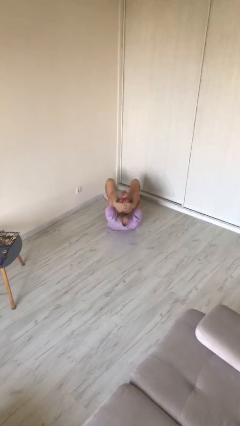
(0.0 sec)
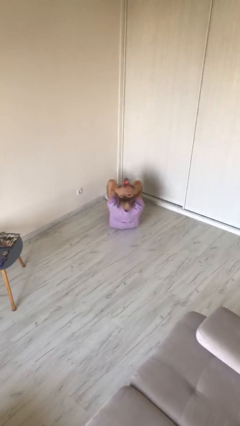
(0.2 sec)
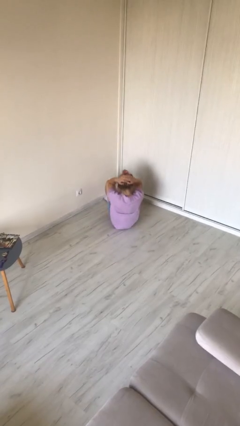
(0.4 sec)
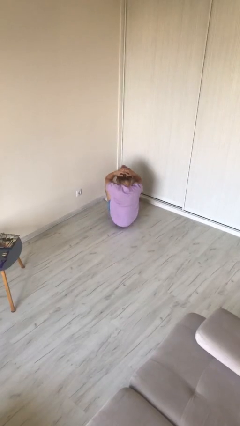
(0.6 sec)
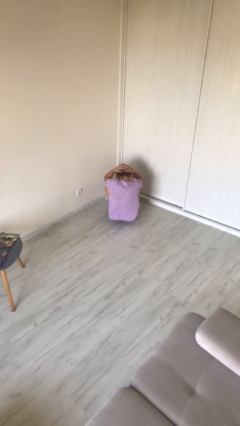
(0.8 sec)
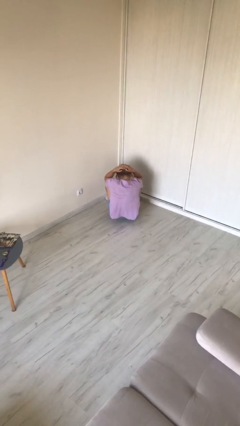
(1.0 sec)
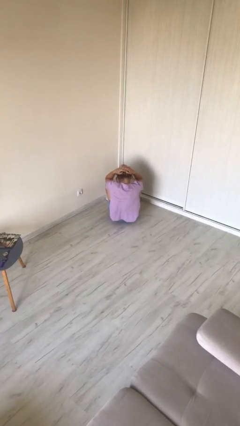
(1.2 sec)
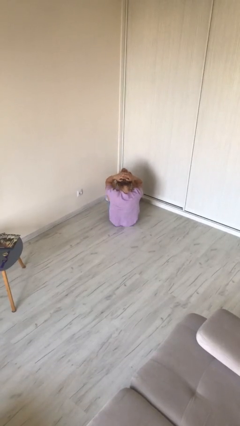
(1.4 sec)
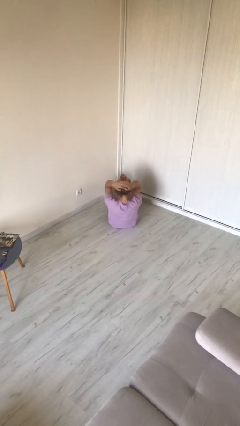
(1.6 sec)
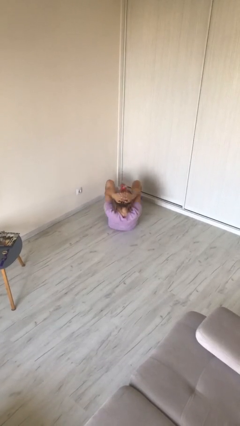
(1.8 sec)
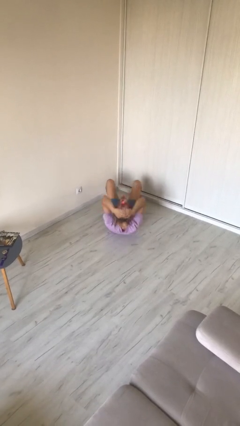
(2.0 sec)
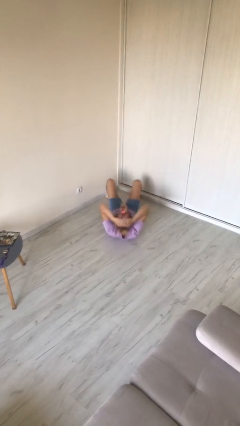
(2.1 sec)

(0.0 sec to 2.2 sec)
person exercises with situp

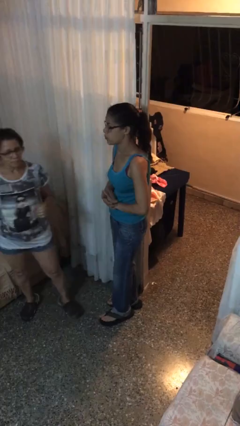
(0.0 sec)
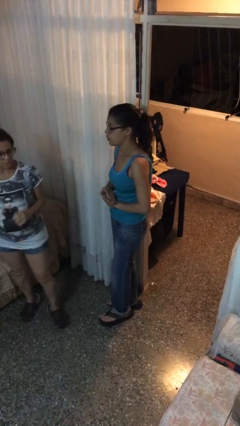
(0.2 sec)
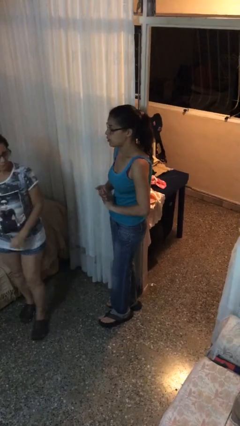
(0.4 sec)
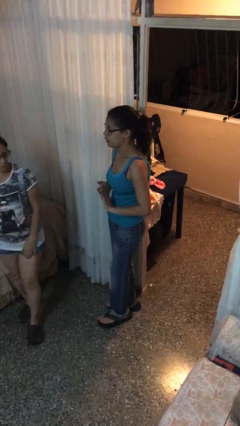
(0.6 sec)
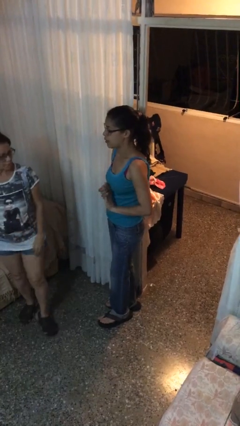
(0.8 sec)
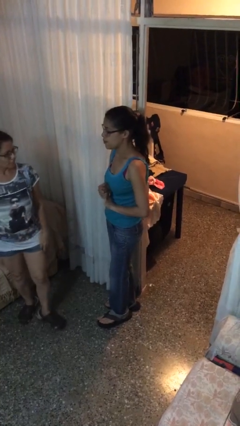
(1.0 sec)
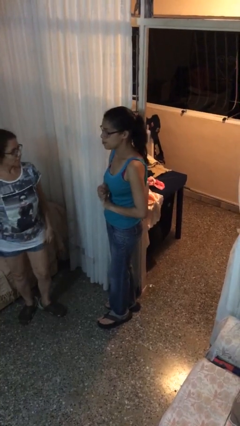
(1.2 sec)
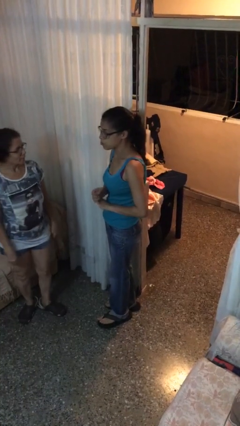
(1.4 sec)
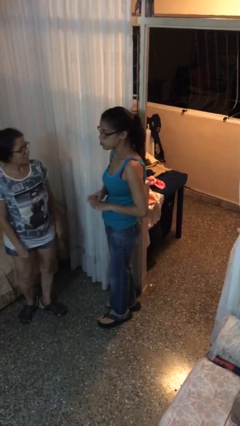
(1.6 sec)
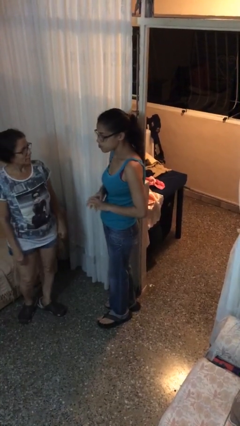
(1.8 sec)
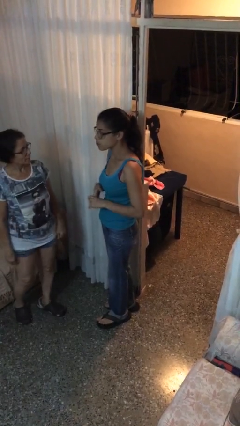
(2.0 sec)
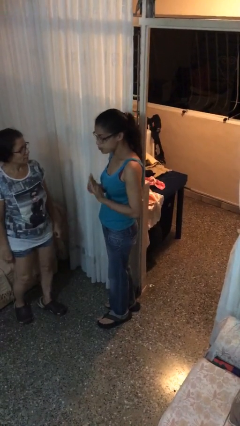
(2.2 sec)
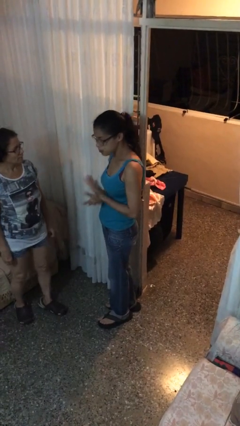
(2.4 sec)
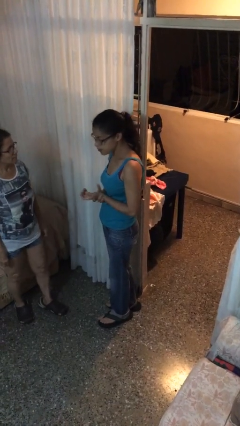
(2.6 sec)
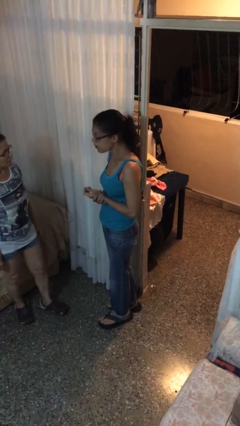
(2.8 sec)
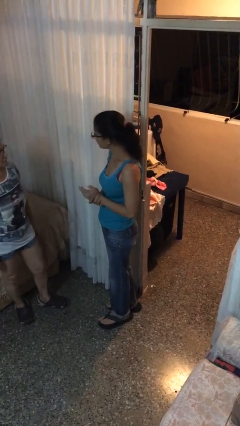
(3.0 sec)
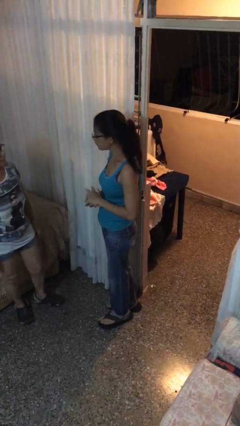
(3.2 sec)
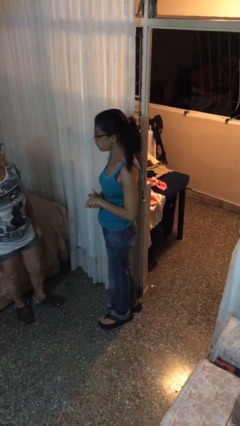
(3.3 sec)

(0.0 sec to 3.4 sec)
person talks to person

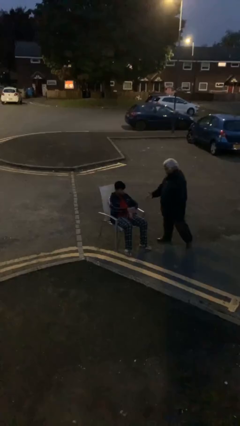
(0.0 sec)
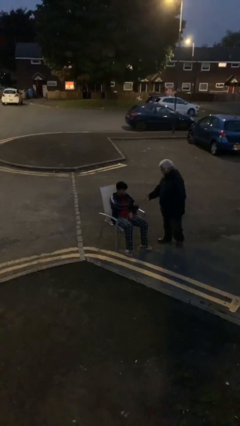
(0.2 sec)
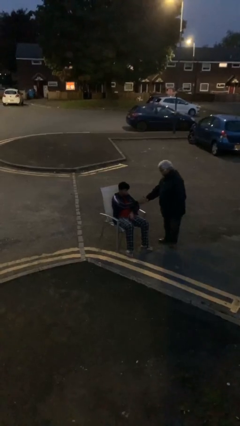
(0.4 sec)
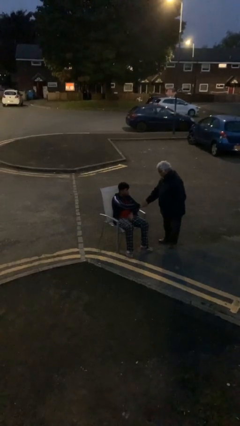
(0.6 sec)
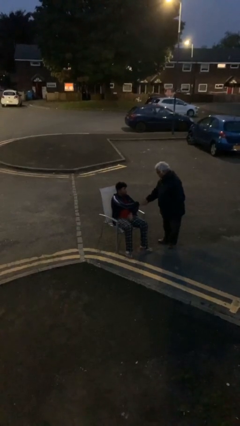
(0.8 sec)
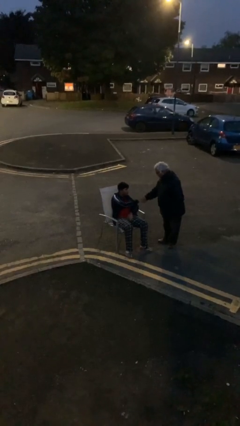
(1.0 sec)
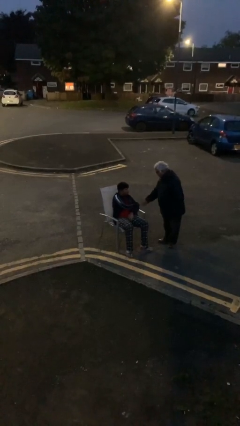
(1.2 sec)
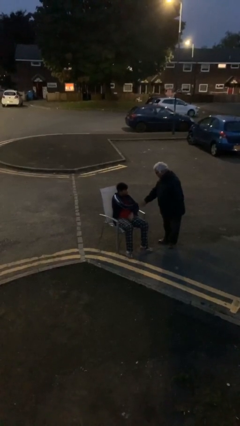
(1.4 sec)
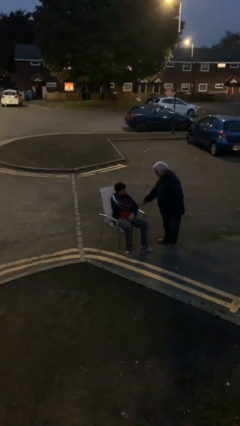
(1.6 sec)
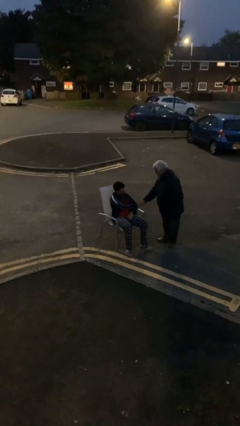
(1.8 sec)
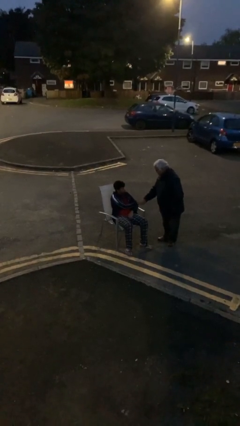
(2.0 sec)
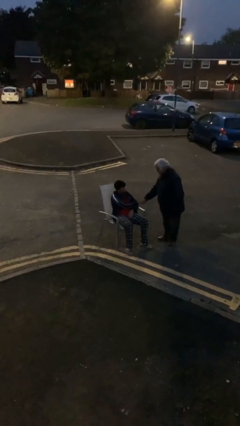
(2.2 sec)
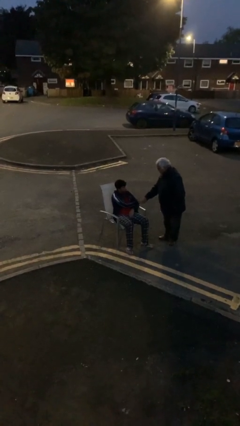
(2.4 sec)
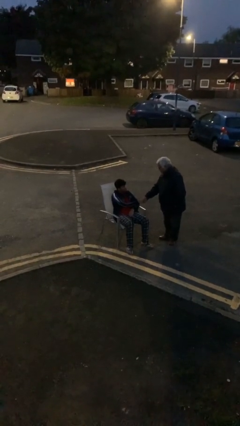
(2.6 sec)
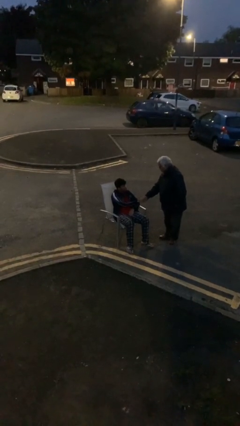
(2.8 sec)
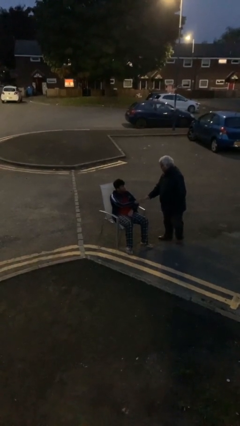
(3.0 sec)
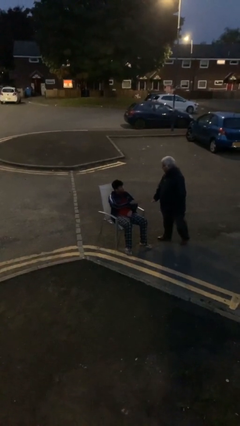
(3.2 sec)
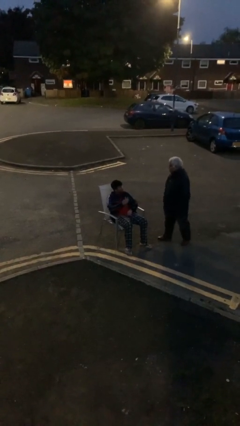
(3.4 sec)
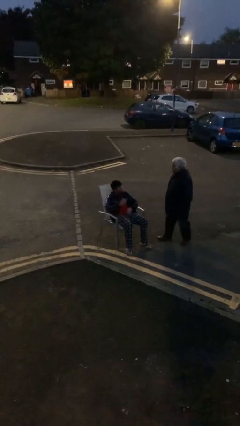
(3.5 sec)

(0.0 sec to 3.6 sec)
person shakes hand

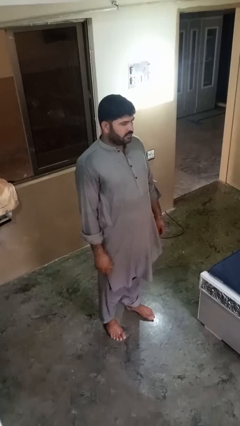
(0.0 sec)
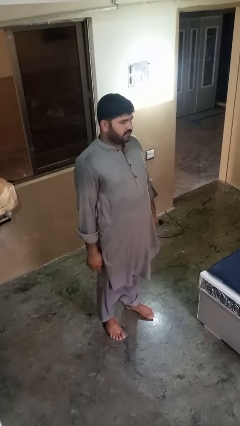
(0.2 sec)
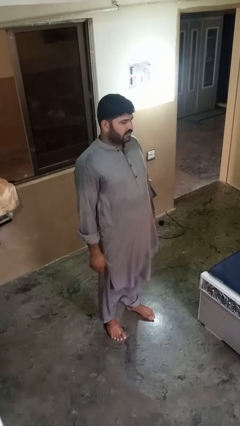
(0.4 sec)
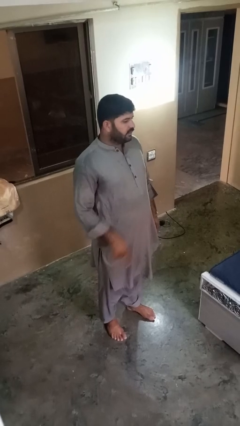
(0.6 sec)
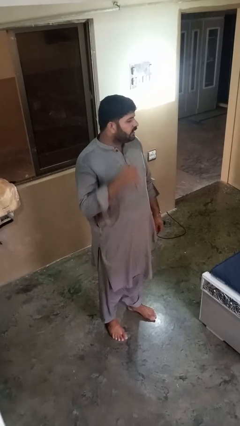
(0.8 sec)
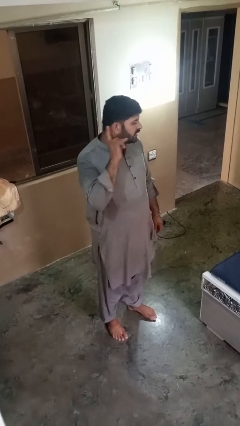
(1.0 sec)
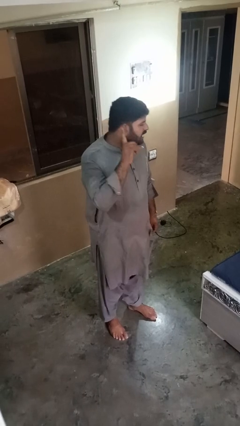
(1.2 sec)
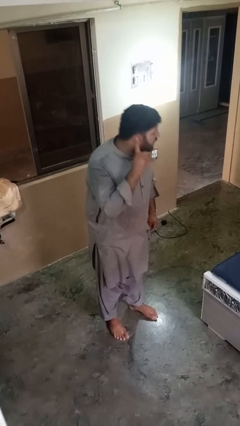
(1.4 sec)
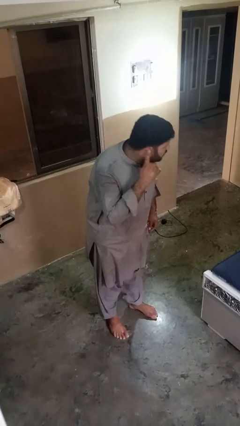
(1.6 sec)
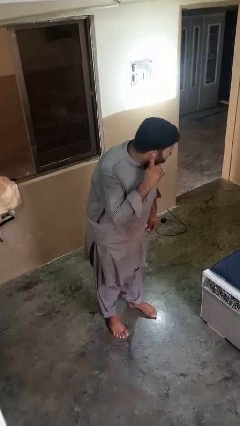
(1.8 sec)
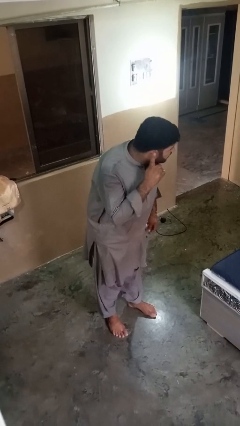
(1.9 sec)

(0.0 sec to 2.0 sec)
person gestures listen closely

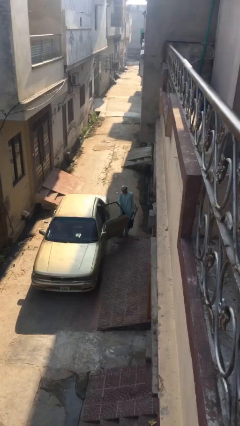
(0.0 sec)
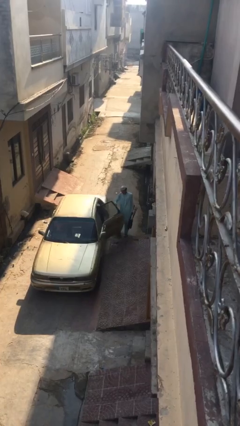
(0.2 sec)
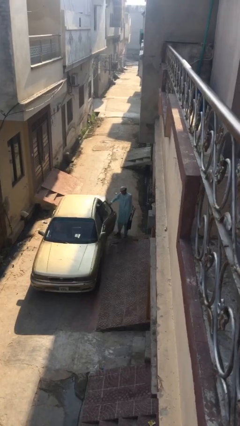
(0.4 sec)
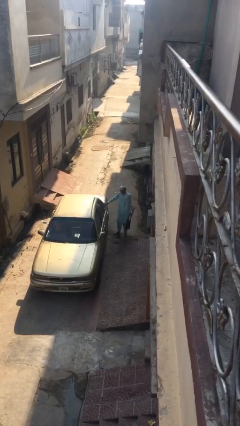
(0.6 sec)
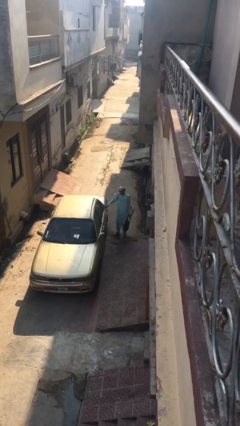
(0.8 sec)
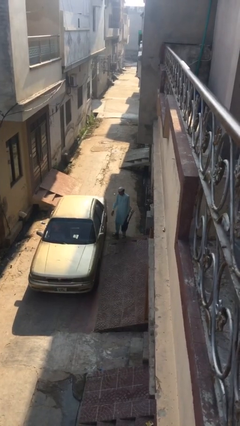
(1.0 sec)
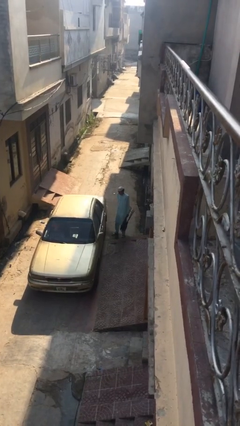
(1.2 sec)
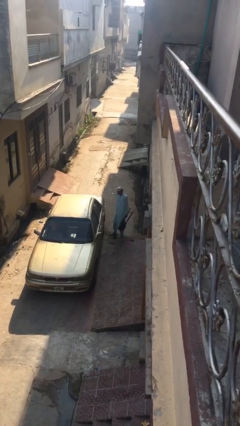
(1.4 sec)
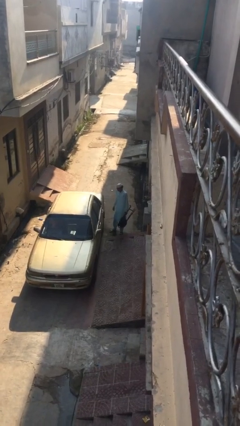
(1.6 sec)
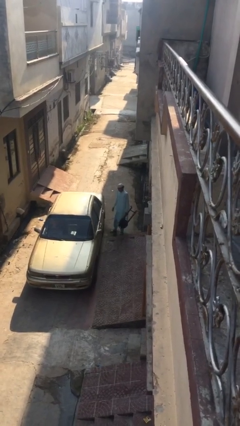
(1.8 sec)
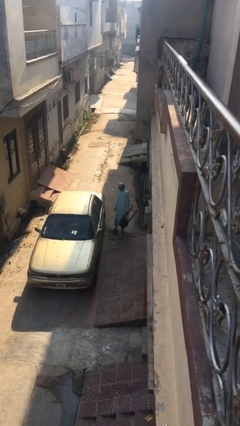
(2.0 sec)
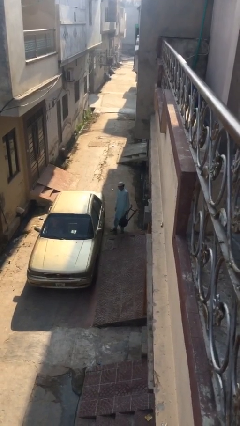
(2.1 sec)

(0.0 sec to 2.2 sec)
person closes car door

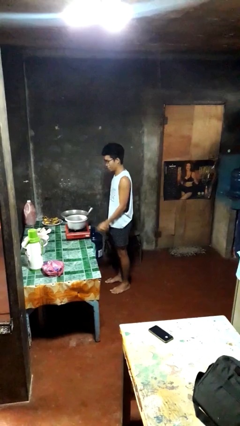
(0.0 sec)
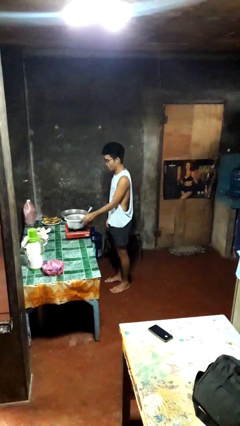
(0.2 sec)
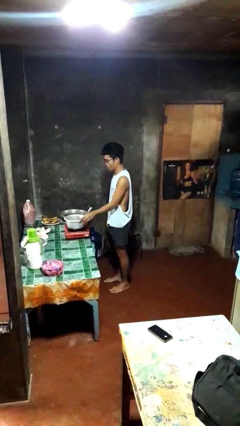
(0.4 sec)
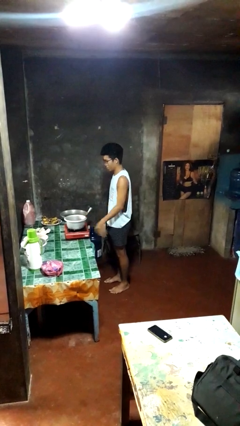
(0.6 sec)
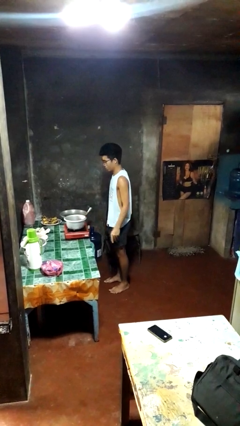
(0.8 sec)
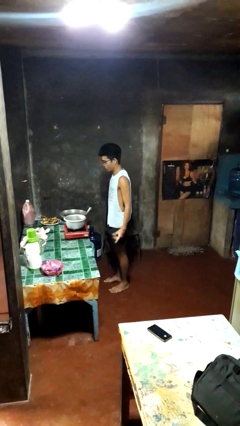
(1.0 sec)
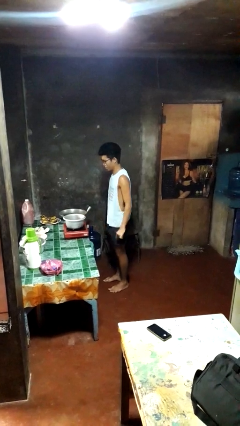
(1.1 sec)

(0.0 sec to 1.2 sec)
person burns hand

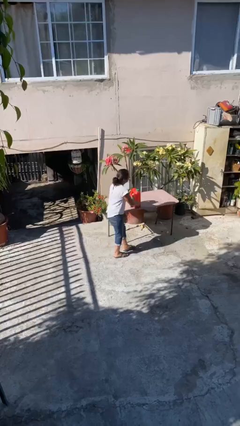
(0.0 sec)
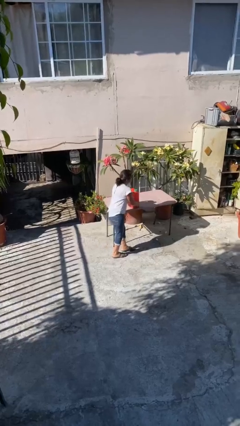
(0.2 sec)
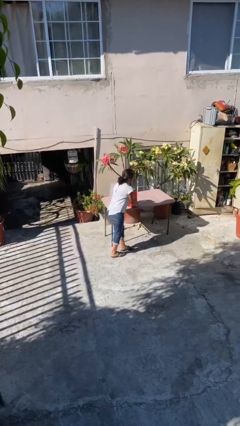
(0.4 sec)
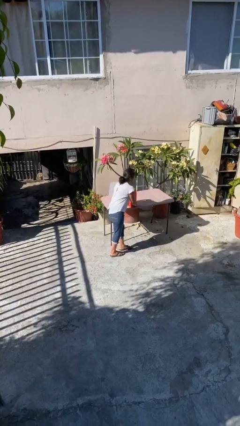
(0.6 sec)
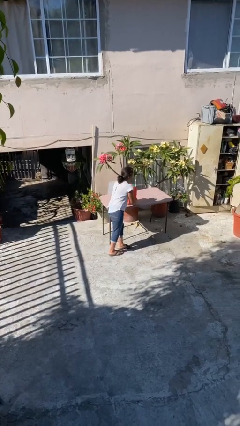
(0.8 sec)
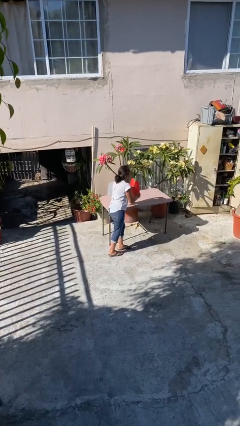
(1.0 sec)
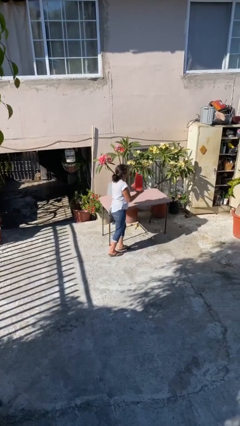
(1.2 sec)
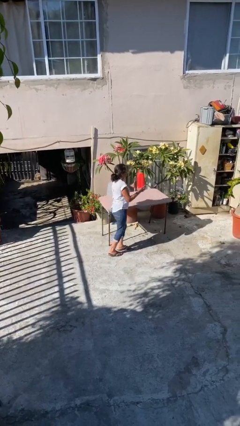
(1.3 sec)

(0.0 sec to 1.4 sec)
person picks up object from table

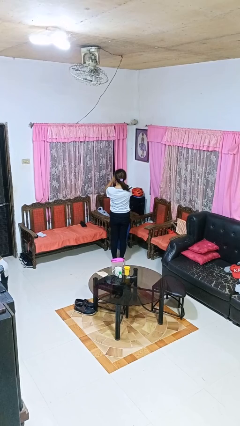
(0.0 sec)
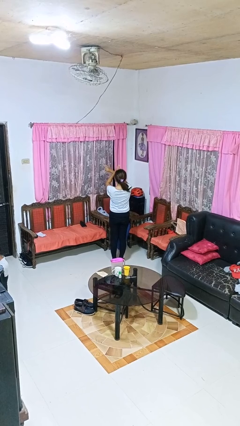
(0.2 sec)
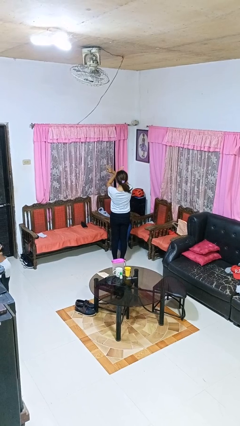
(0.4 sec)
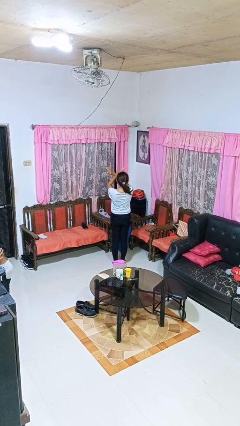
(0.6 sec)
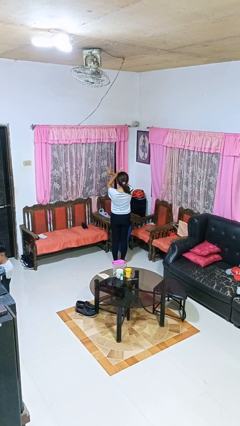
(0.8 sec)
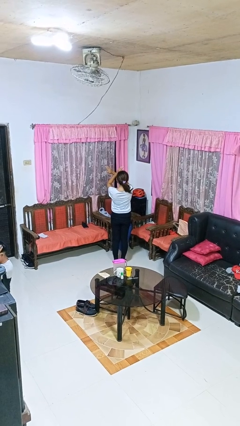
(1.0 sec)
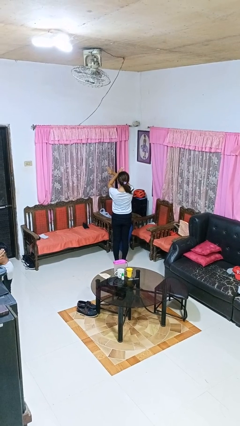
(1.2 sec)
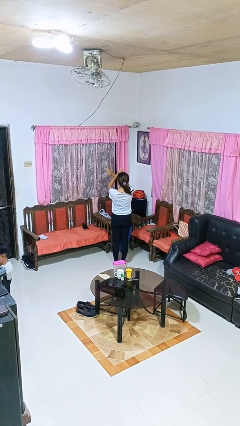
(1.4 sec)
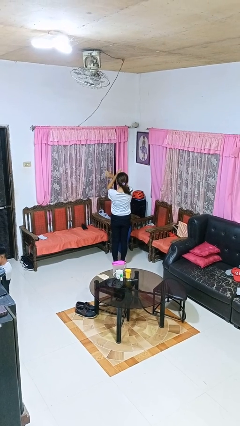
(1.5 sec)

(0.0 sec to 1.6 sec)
person gestures arms x
